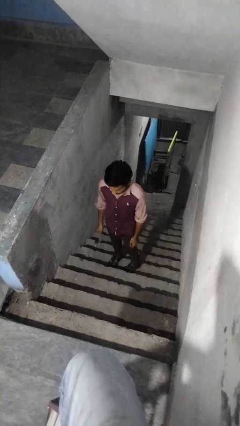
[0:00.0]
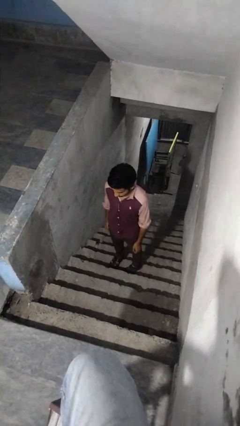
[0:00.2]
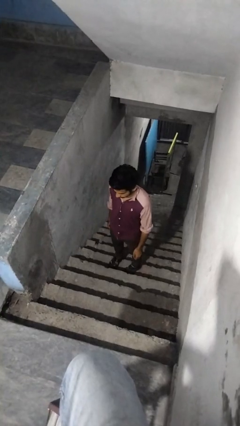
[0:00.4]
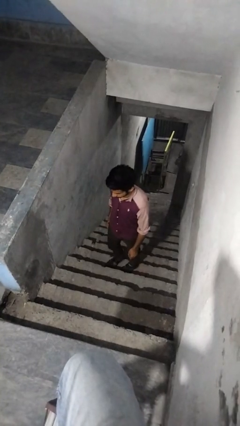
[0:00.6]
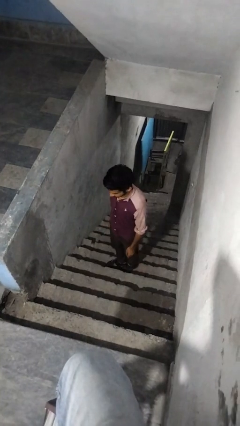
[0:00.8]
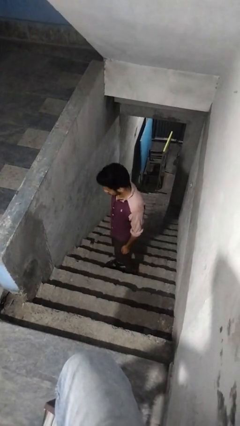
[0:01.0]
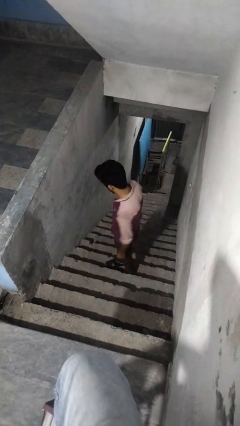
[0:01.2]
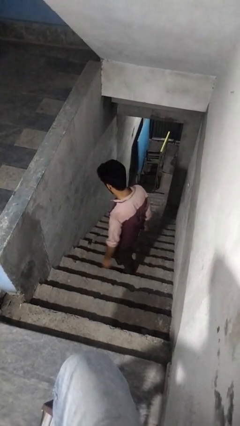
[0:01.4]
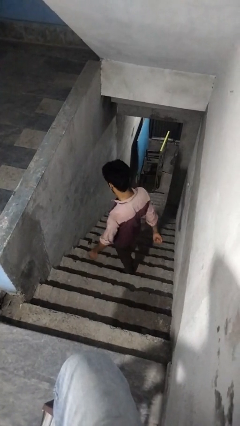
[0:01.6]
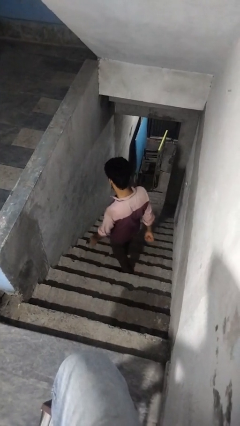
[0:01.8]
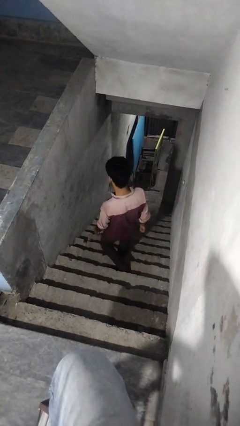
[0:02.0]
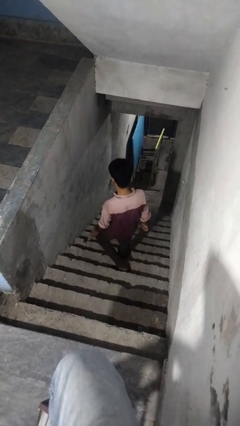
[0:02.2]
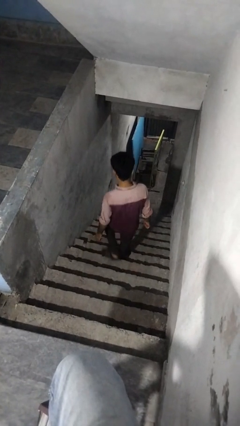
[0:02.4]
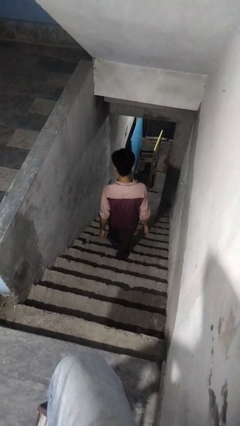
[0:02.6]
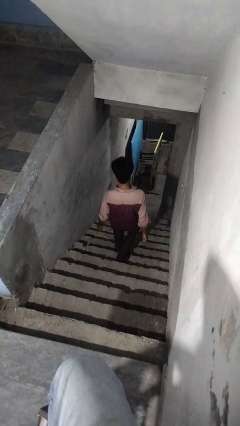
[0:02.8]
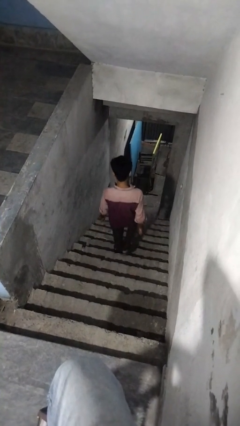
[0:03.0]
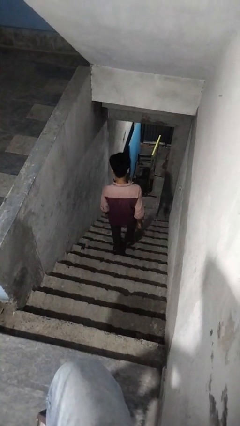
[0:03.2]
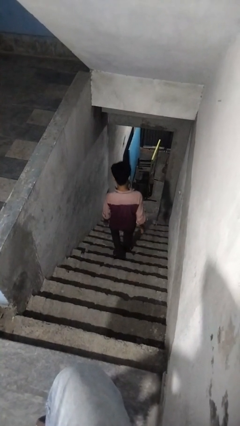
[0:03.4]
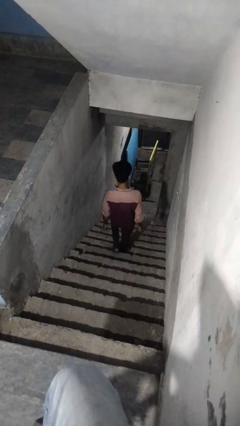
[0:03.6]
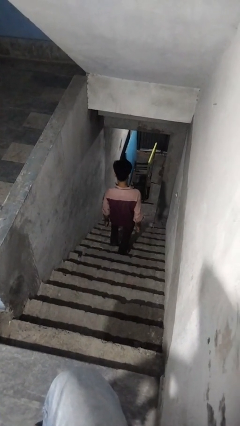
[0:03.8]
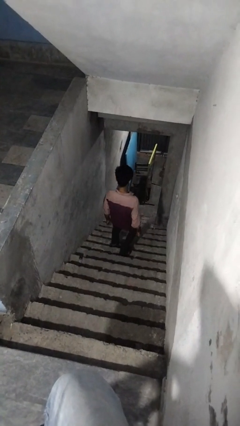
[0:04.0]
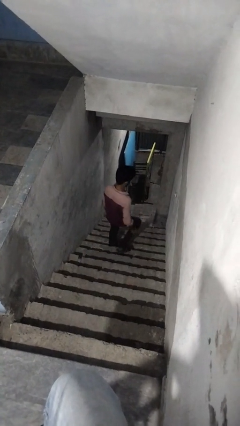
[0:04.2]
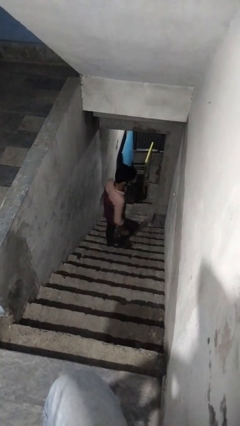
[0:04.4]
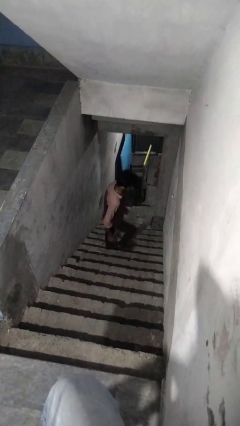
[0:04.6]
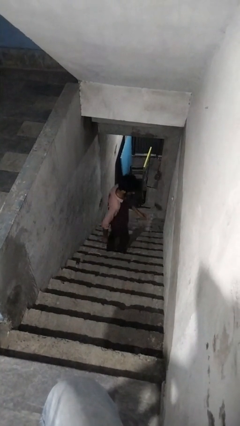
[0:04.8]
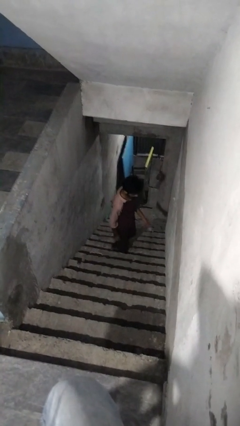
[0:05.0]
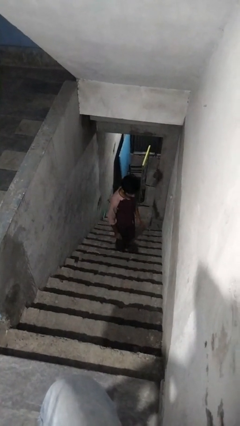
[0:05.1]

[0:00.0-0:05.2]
person climbs down stairs

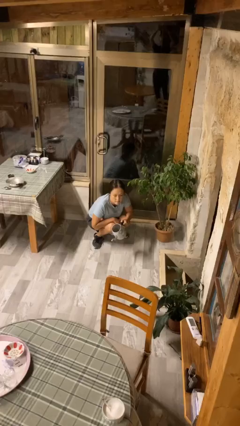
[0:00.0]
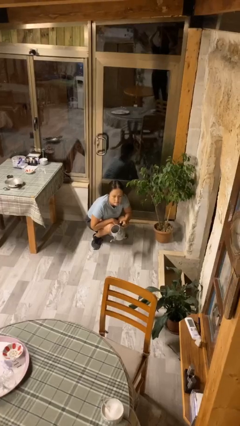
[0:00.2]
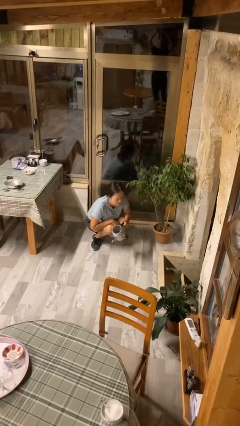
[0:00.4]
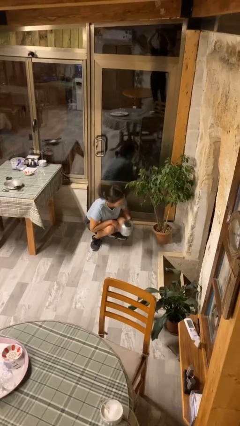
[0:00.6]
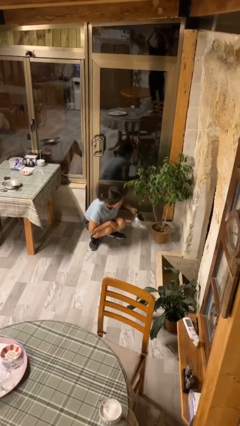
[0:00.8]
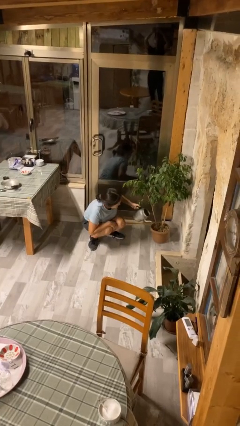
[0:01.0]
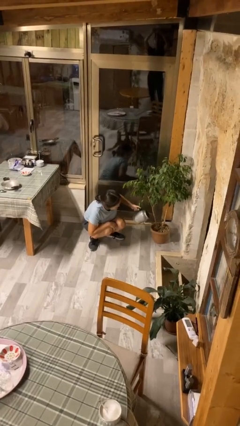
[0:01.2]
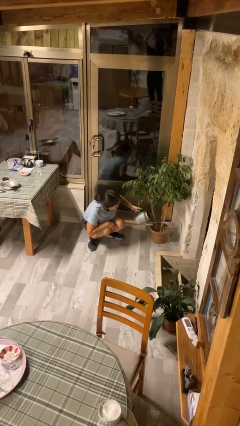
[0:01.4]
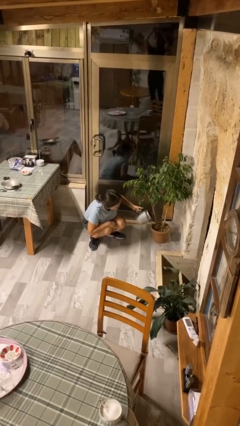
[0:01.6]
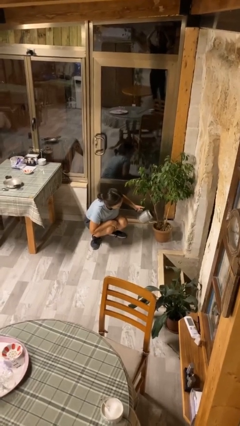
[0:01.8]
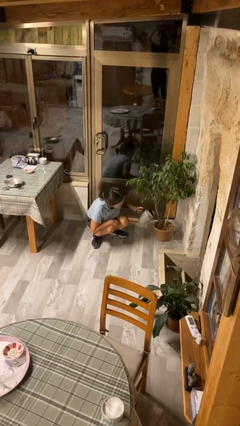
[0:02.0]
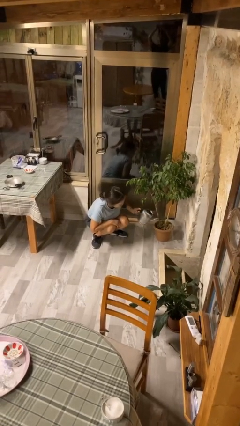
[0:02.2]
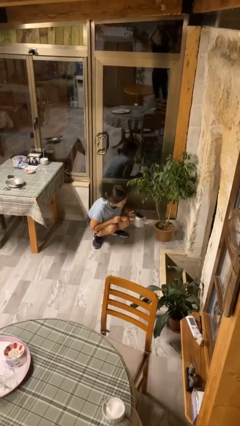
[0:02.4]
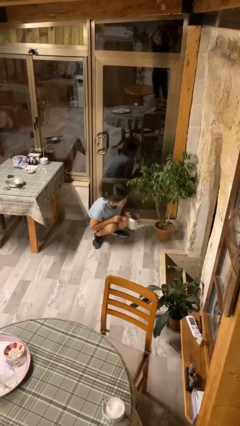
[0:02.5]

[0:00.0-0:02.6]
person waters houseplant

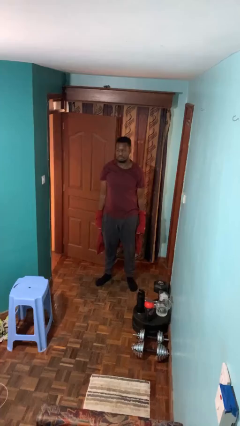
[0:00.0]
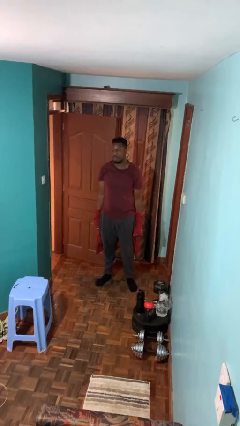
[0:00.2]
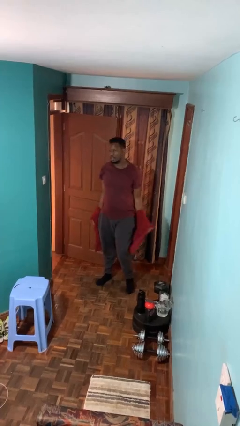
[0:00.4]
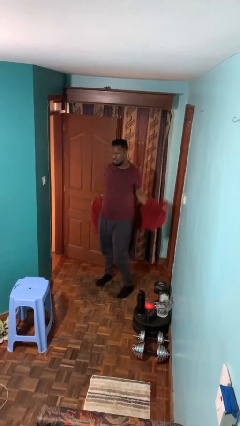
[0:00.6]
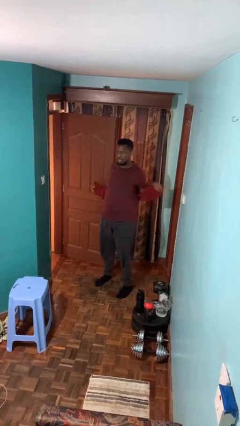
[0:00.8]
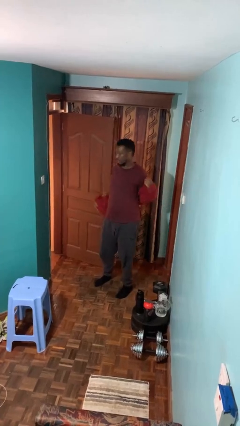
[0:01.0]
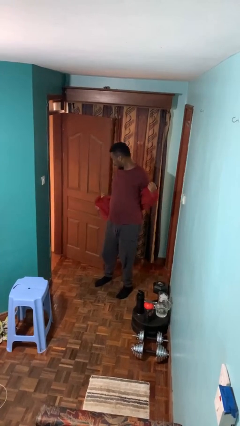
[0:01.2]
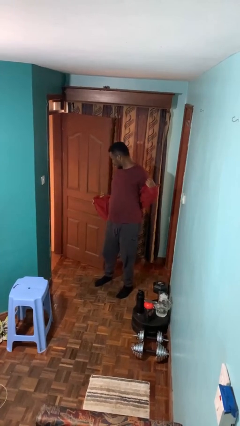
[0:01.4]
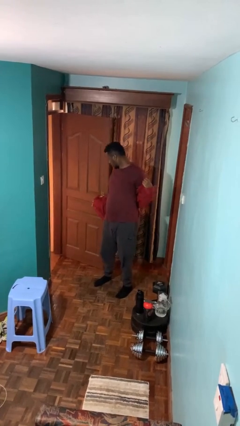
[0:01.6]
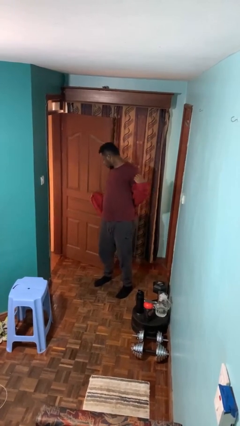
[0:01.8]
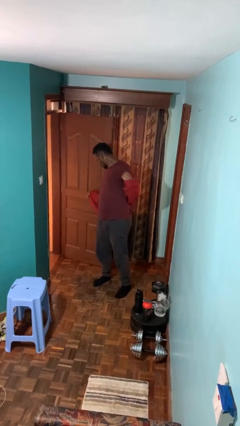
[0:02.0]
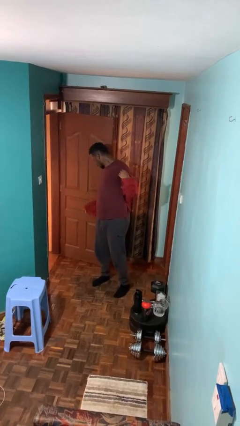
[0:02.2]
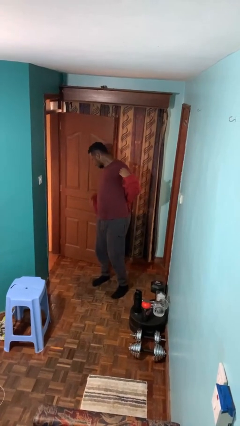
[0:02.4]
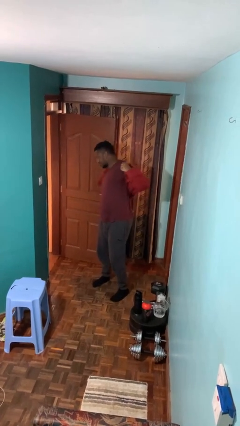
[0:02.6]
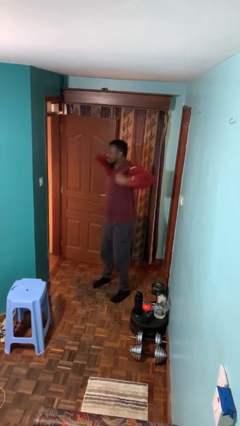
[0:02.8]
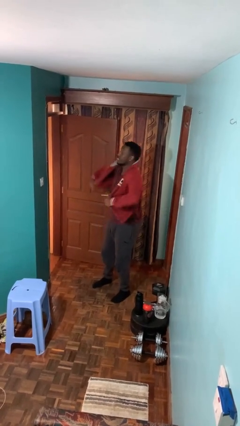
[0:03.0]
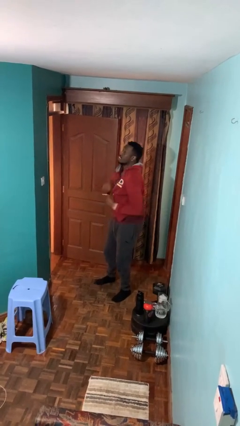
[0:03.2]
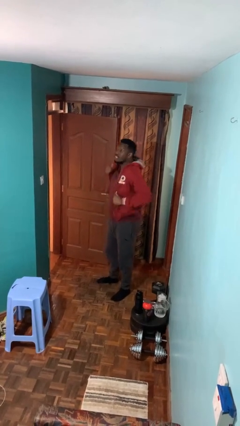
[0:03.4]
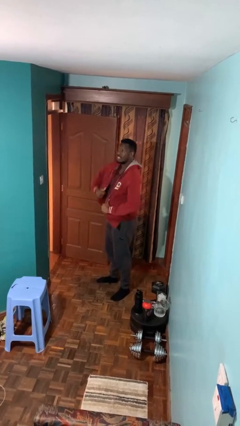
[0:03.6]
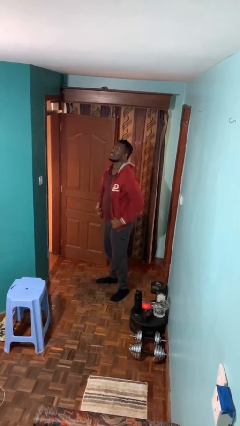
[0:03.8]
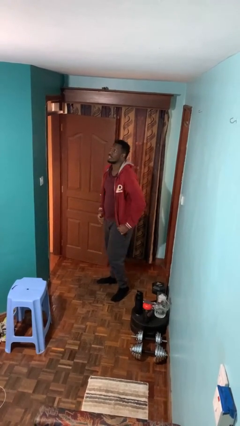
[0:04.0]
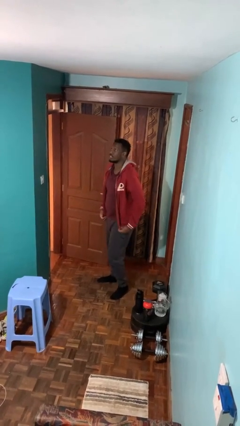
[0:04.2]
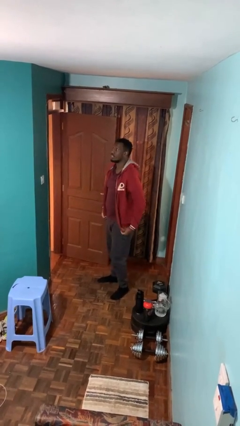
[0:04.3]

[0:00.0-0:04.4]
person puts on jacket

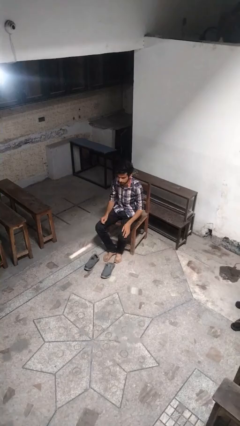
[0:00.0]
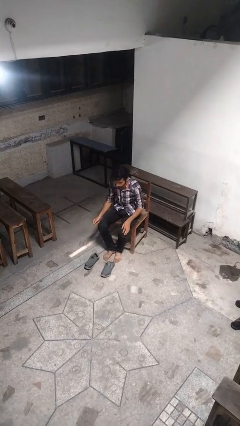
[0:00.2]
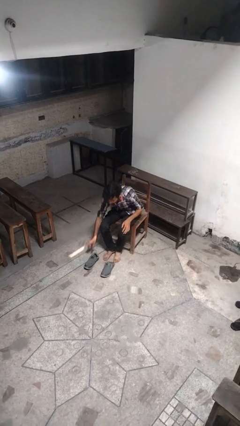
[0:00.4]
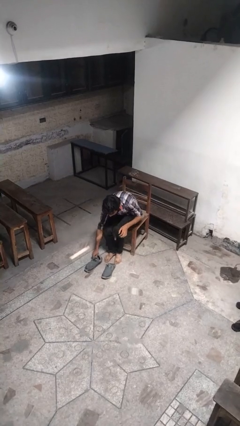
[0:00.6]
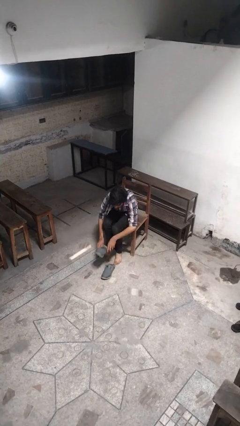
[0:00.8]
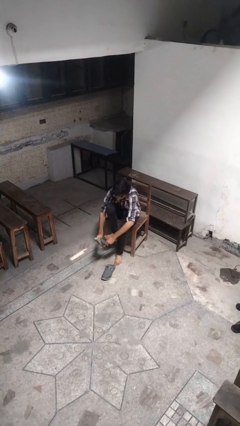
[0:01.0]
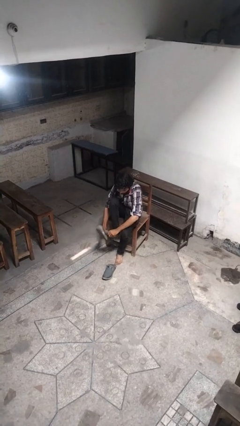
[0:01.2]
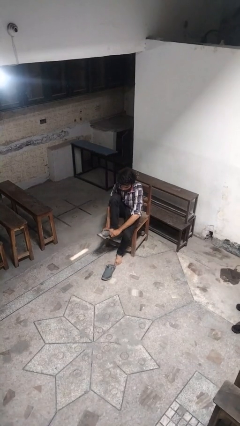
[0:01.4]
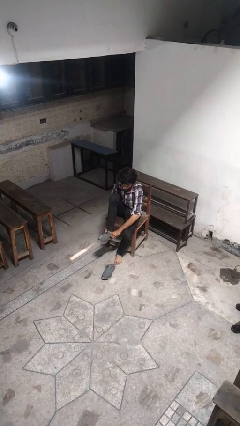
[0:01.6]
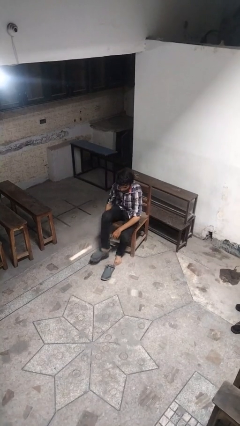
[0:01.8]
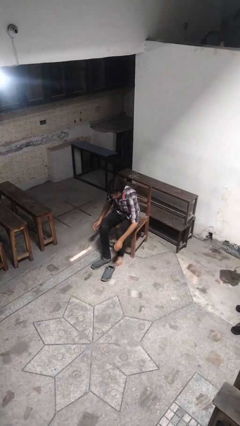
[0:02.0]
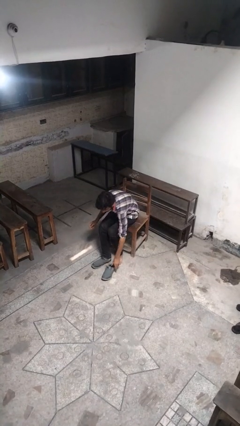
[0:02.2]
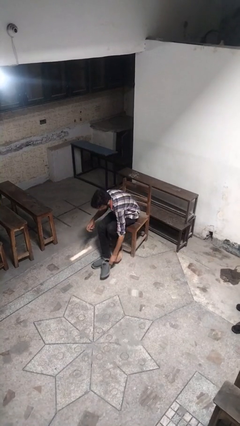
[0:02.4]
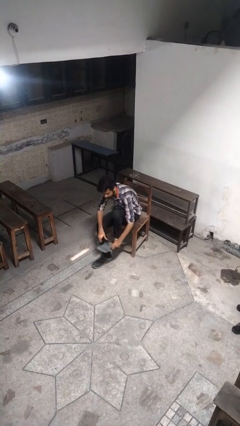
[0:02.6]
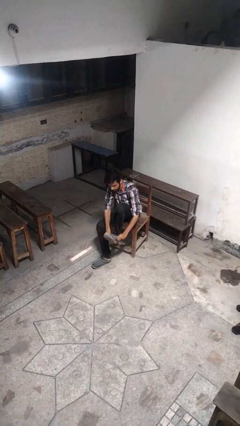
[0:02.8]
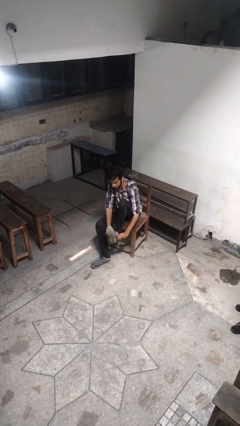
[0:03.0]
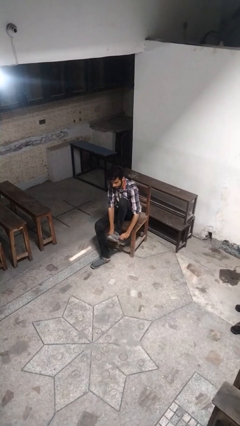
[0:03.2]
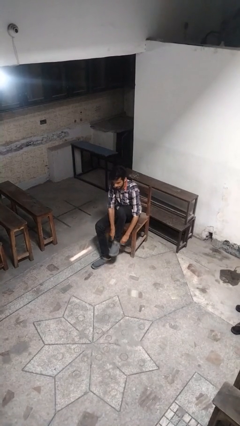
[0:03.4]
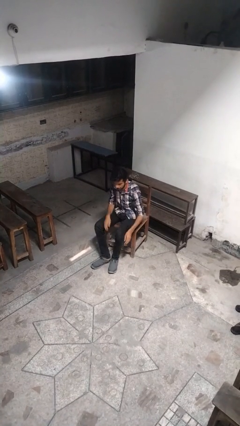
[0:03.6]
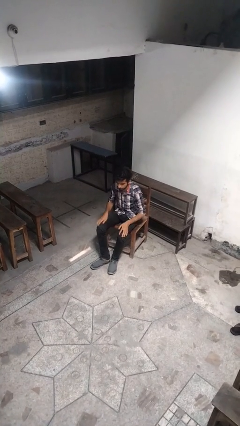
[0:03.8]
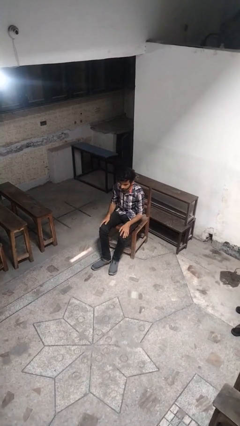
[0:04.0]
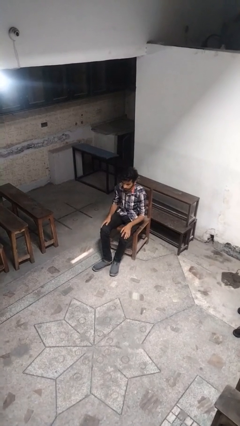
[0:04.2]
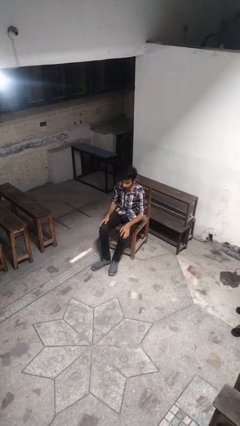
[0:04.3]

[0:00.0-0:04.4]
person puts on shoes

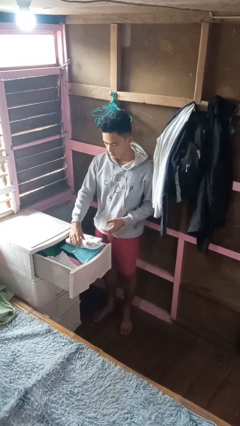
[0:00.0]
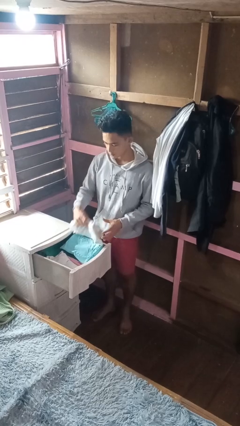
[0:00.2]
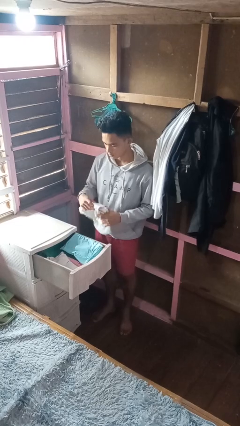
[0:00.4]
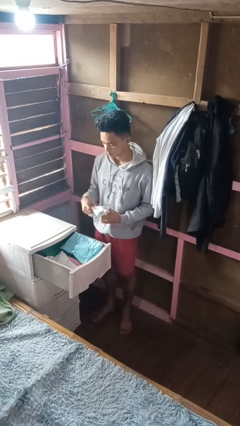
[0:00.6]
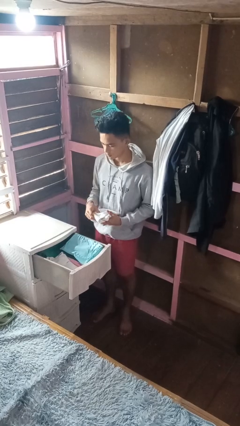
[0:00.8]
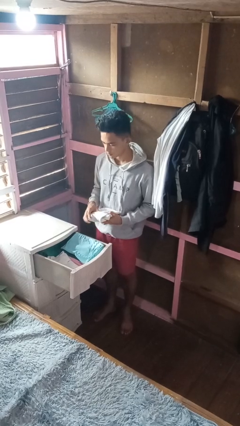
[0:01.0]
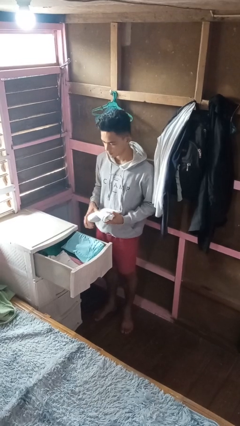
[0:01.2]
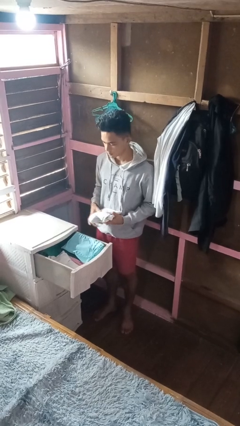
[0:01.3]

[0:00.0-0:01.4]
person takes clothes from dresser
